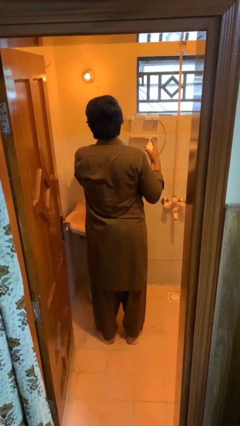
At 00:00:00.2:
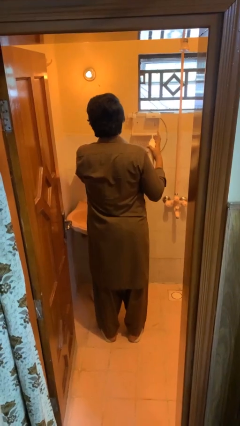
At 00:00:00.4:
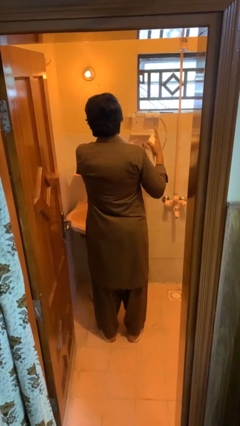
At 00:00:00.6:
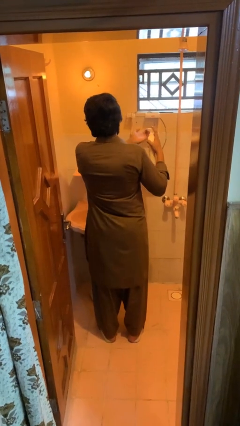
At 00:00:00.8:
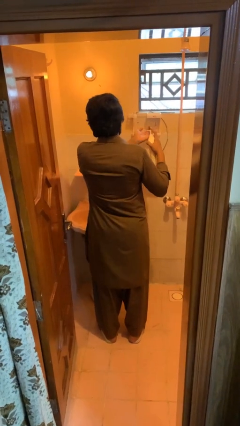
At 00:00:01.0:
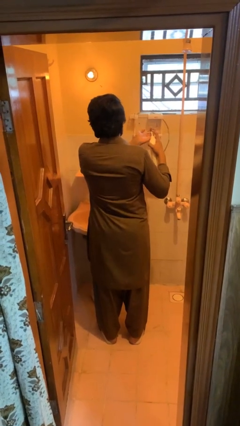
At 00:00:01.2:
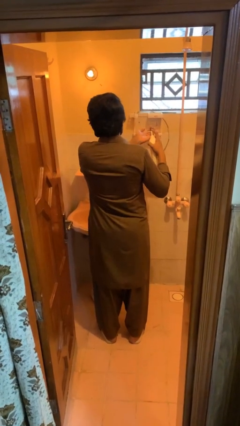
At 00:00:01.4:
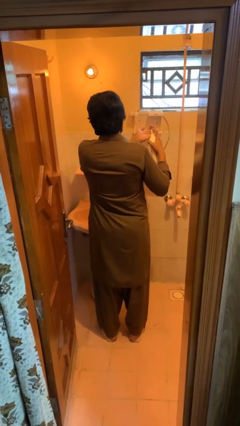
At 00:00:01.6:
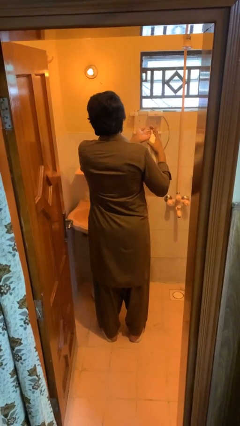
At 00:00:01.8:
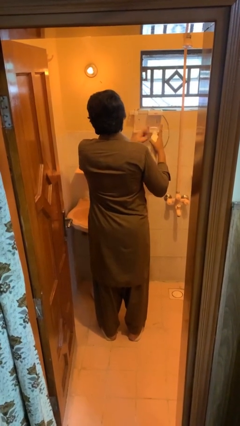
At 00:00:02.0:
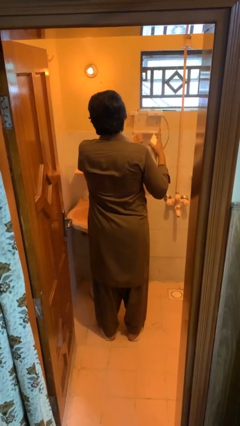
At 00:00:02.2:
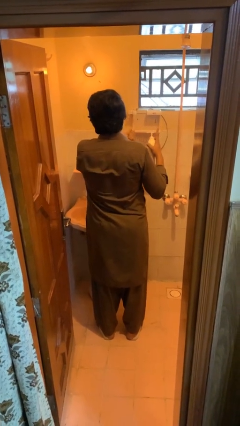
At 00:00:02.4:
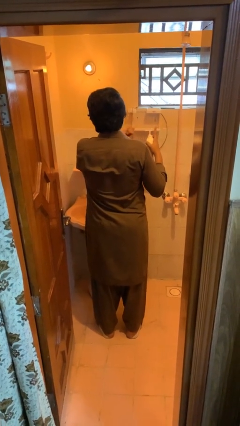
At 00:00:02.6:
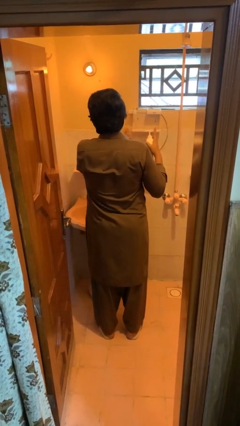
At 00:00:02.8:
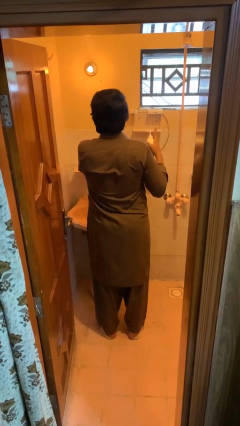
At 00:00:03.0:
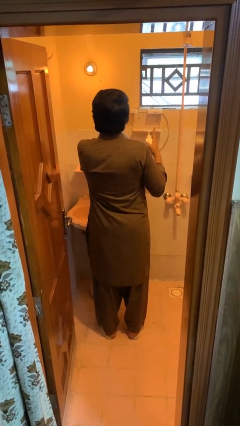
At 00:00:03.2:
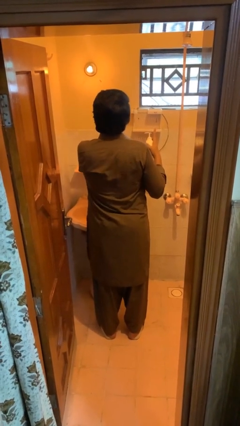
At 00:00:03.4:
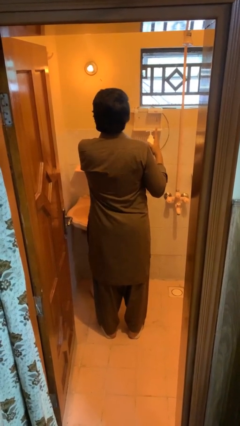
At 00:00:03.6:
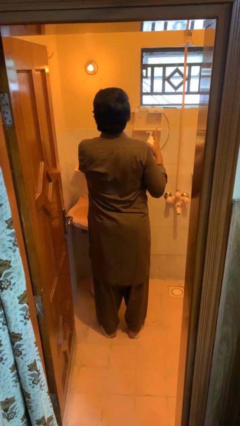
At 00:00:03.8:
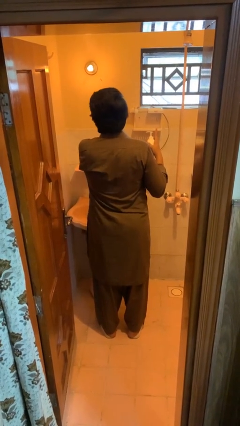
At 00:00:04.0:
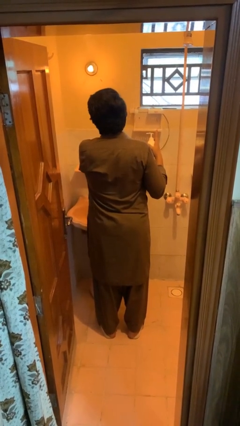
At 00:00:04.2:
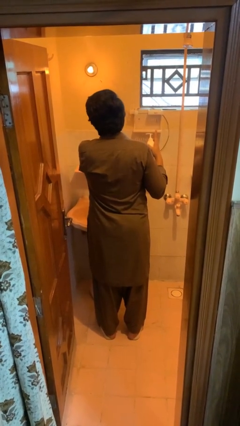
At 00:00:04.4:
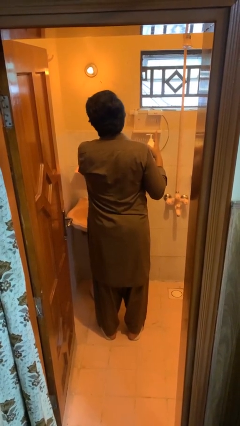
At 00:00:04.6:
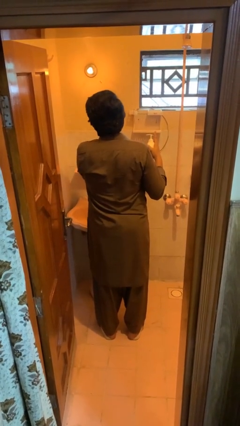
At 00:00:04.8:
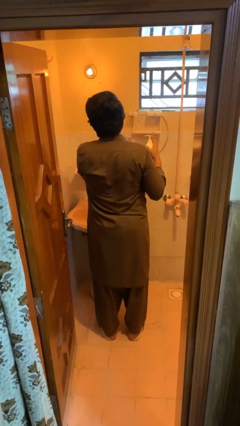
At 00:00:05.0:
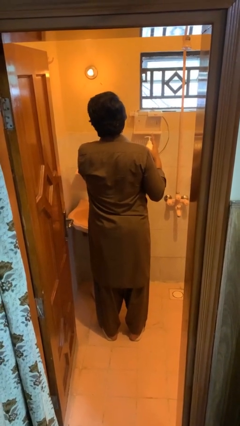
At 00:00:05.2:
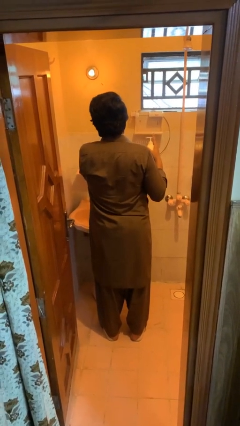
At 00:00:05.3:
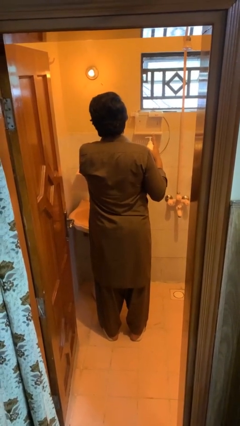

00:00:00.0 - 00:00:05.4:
person applies facial moisturizer

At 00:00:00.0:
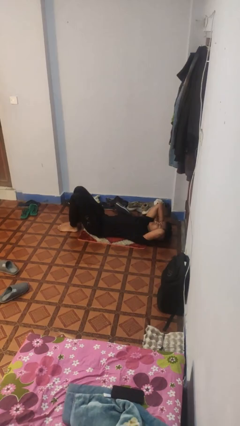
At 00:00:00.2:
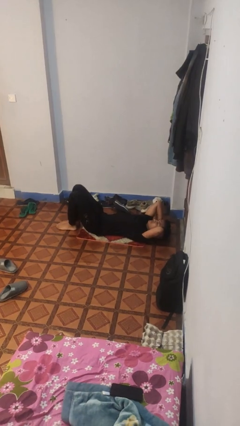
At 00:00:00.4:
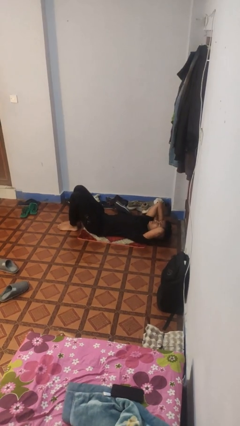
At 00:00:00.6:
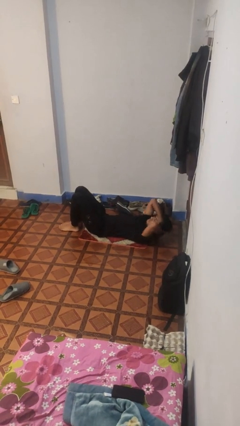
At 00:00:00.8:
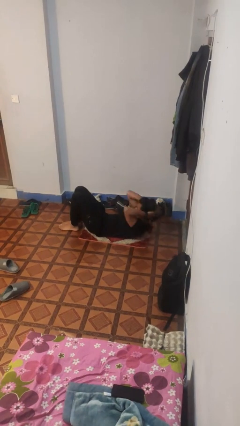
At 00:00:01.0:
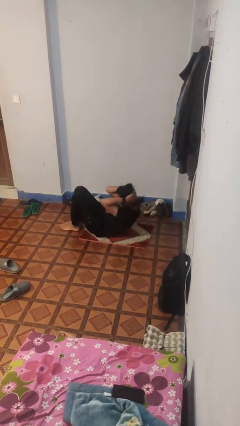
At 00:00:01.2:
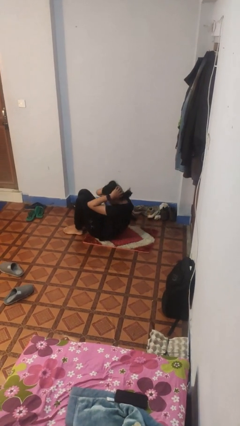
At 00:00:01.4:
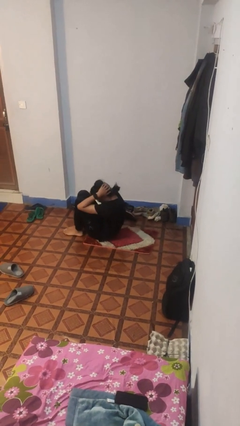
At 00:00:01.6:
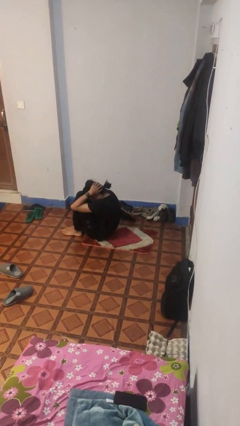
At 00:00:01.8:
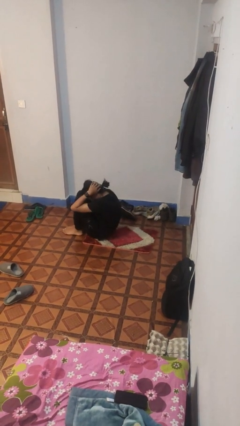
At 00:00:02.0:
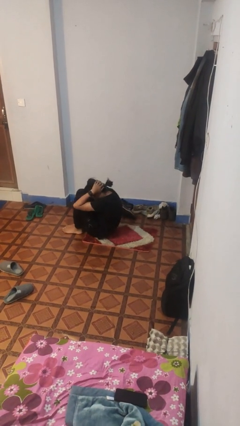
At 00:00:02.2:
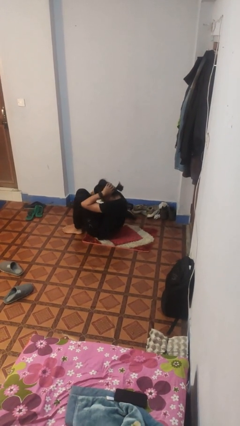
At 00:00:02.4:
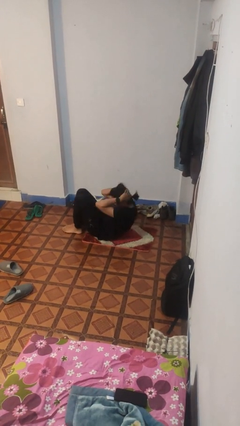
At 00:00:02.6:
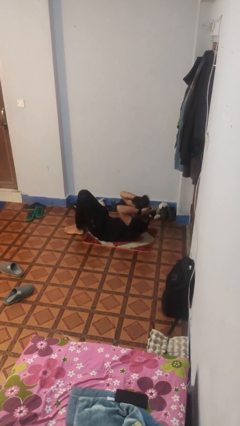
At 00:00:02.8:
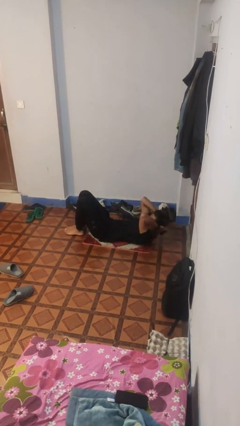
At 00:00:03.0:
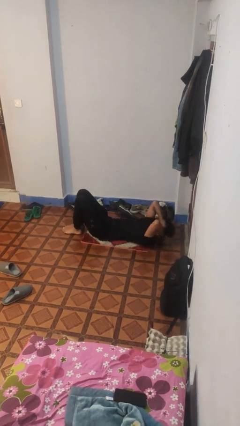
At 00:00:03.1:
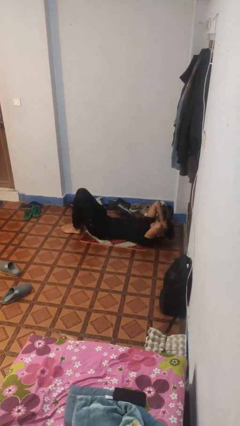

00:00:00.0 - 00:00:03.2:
person exercises with situp

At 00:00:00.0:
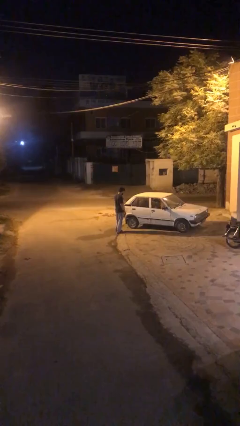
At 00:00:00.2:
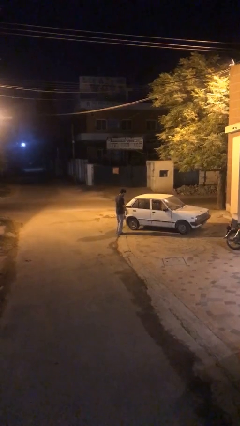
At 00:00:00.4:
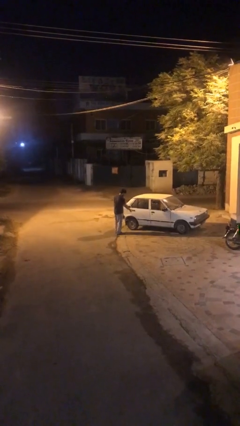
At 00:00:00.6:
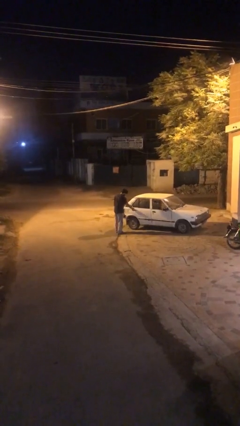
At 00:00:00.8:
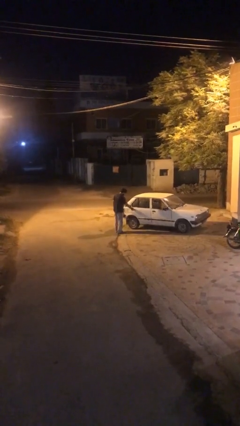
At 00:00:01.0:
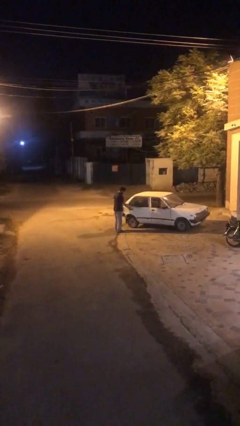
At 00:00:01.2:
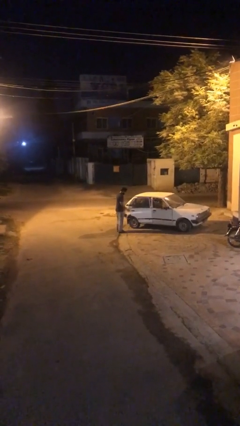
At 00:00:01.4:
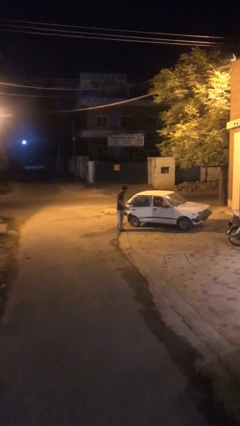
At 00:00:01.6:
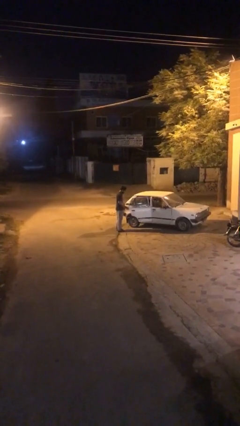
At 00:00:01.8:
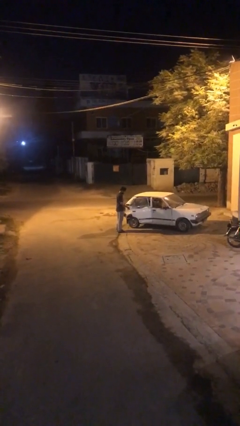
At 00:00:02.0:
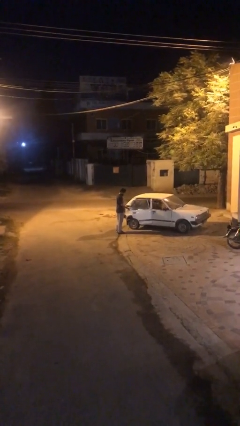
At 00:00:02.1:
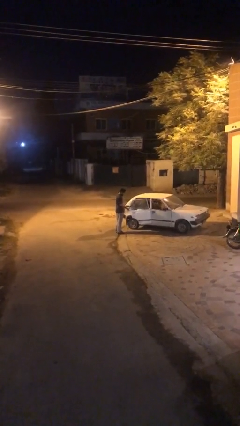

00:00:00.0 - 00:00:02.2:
person opens car door

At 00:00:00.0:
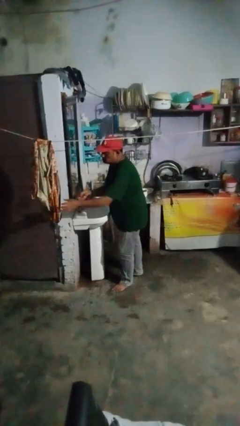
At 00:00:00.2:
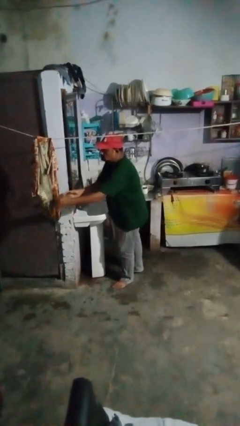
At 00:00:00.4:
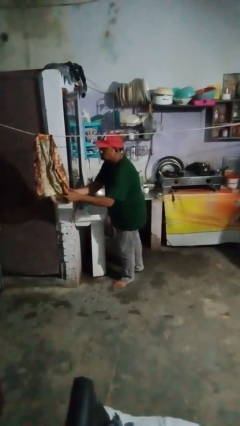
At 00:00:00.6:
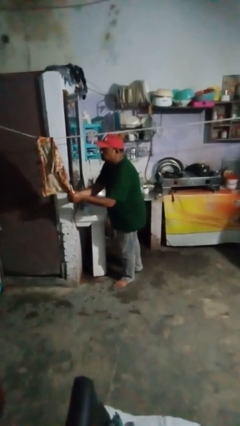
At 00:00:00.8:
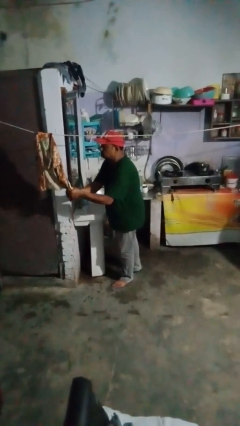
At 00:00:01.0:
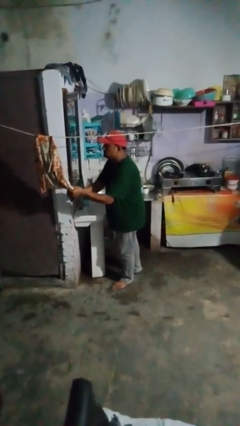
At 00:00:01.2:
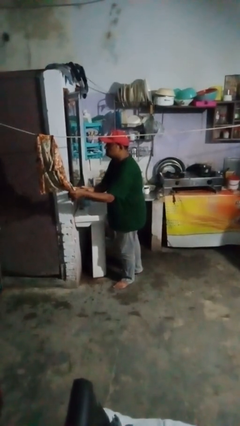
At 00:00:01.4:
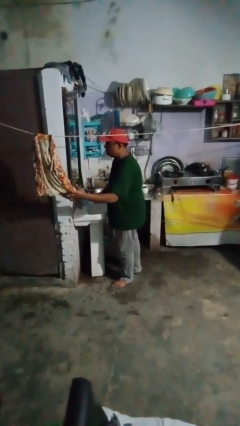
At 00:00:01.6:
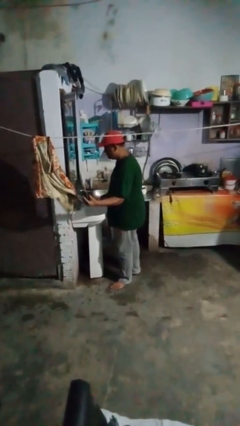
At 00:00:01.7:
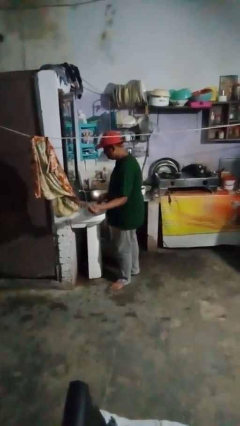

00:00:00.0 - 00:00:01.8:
person dries hands with towel

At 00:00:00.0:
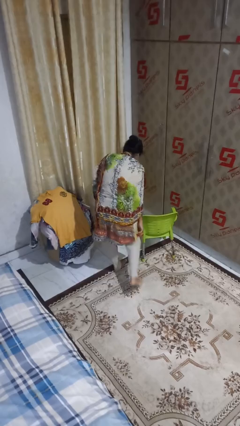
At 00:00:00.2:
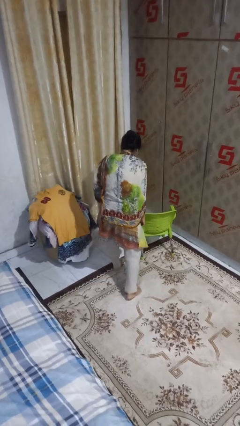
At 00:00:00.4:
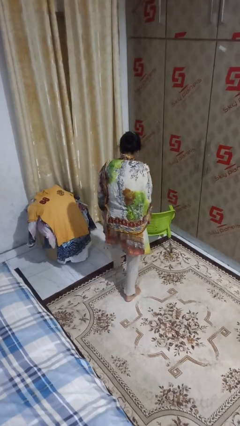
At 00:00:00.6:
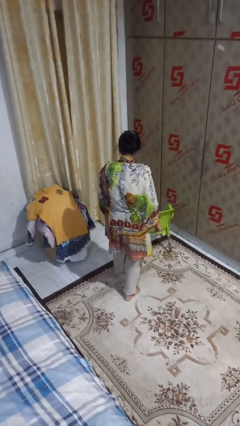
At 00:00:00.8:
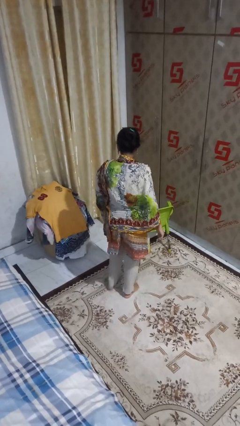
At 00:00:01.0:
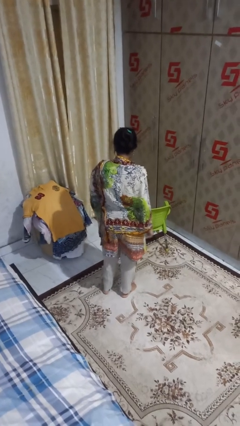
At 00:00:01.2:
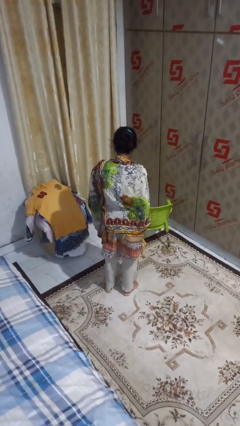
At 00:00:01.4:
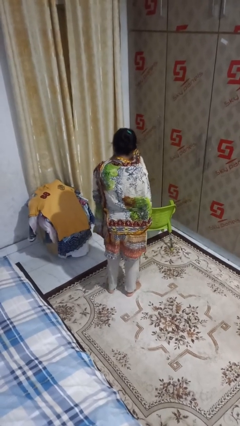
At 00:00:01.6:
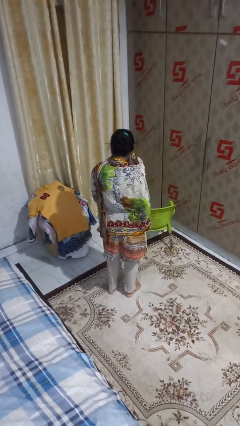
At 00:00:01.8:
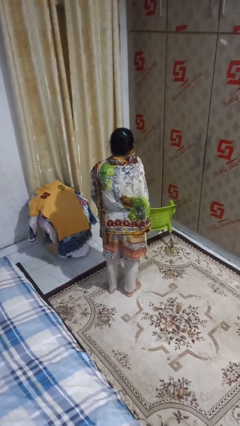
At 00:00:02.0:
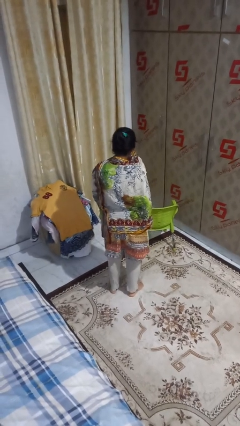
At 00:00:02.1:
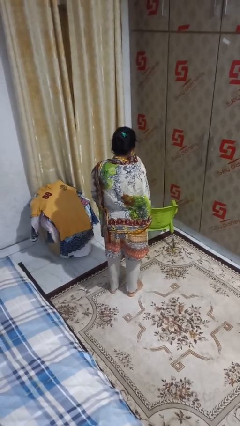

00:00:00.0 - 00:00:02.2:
person stubs toe

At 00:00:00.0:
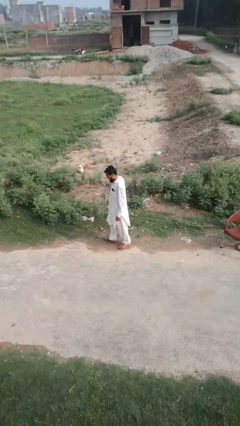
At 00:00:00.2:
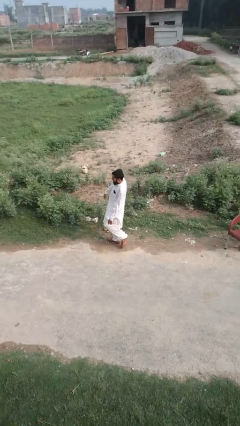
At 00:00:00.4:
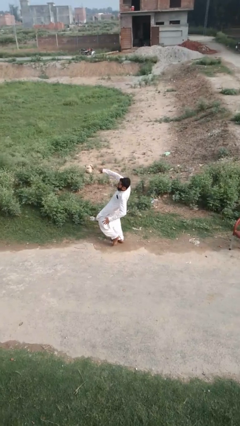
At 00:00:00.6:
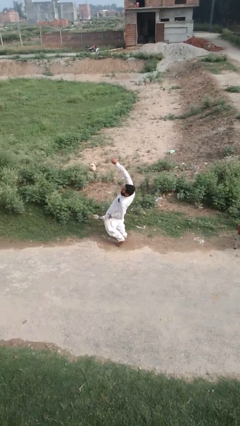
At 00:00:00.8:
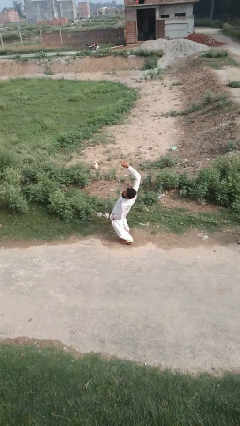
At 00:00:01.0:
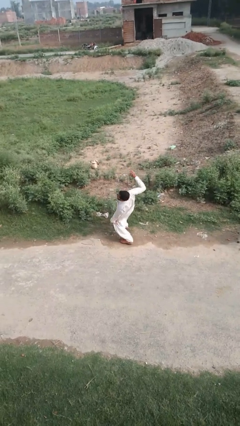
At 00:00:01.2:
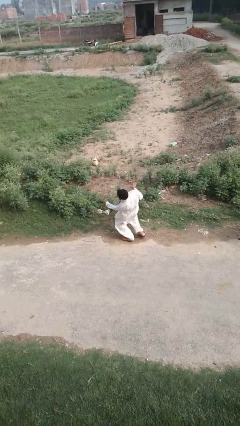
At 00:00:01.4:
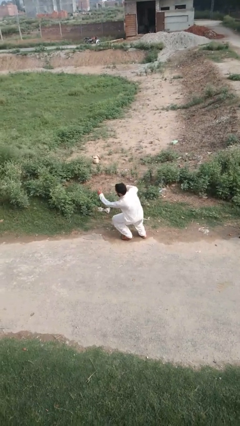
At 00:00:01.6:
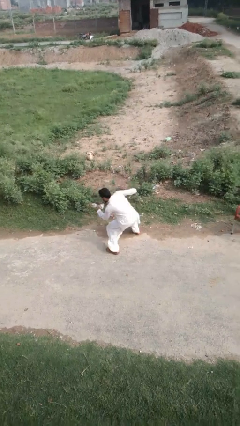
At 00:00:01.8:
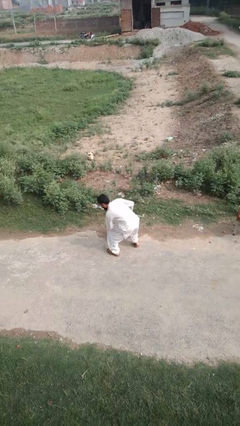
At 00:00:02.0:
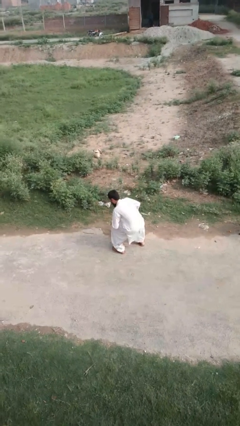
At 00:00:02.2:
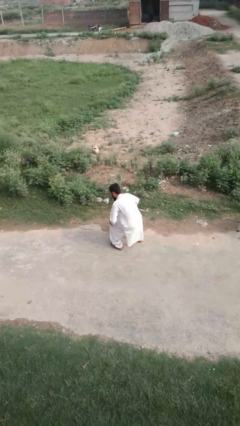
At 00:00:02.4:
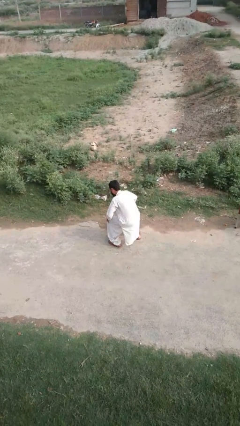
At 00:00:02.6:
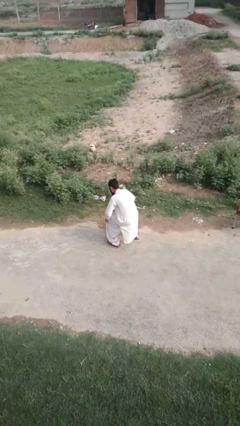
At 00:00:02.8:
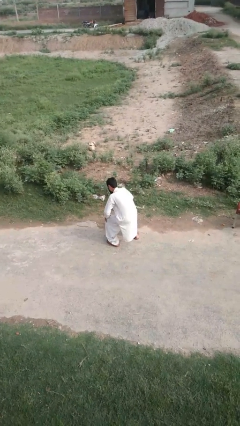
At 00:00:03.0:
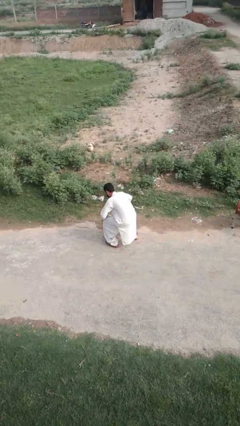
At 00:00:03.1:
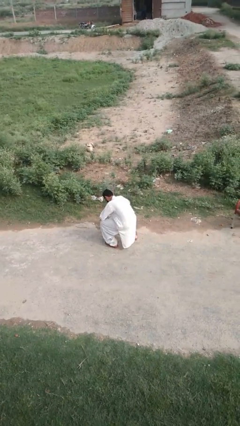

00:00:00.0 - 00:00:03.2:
person trips on object on floor
